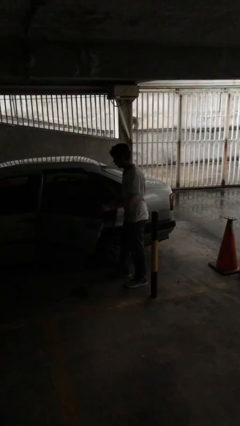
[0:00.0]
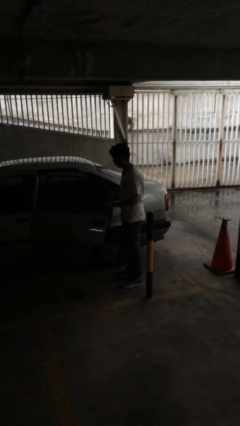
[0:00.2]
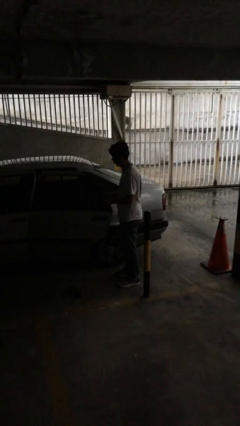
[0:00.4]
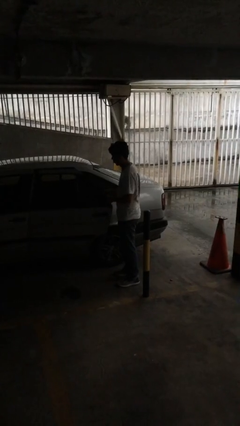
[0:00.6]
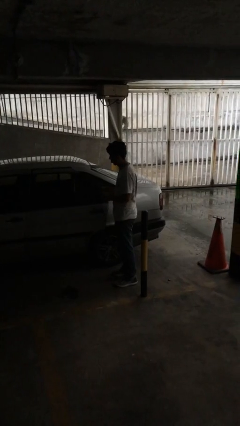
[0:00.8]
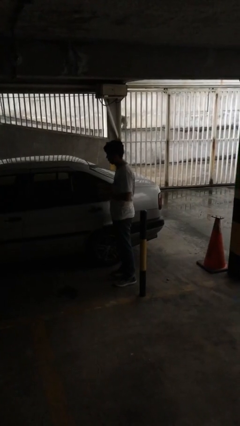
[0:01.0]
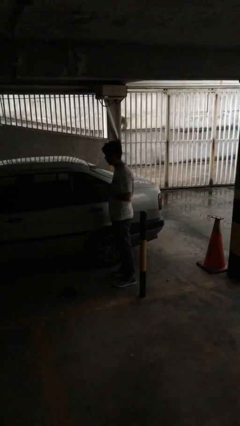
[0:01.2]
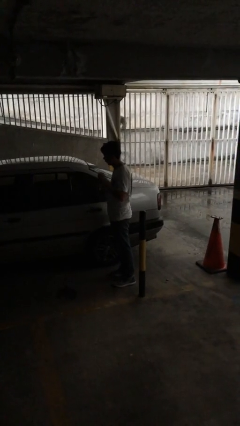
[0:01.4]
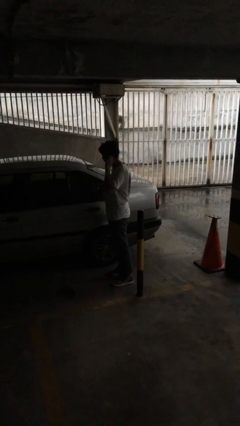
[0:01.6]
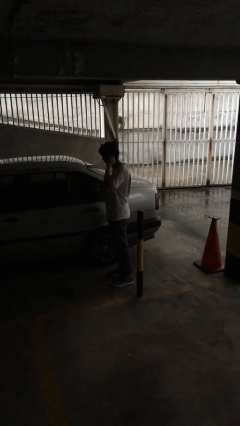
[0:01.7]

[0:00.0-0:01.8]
person closes car door

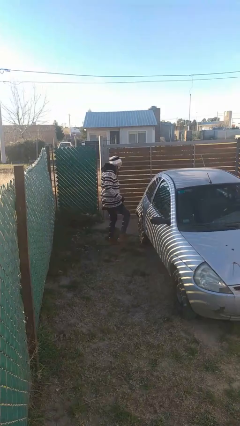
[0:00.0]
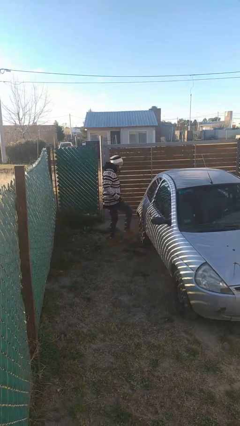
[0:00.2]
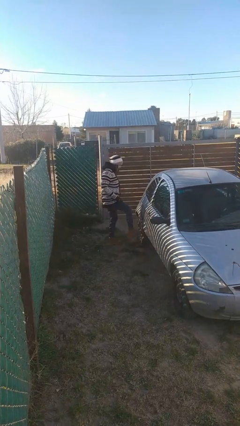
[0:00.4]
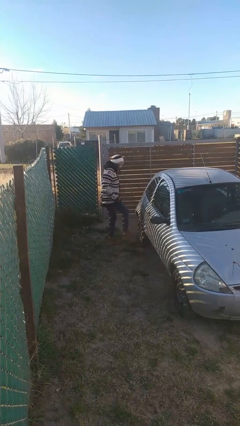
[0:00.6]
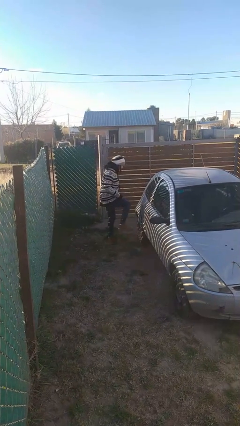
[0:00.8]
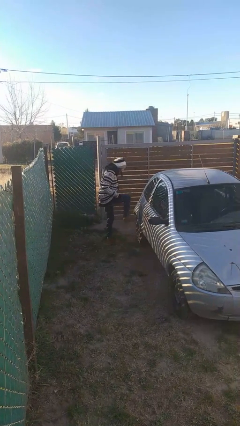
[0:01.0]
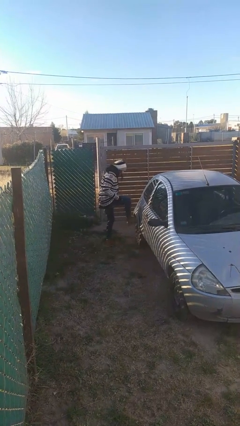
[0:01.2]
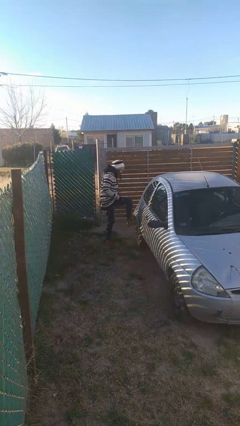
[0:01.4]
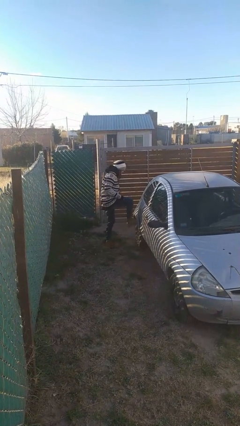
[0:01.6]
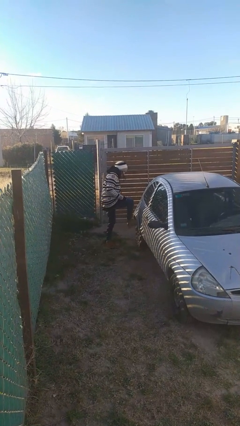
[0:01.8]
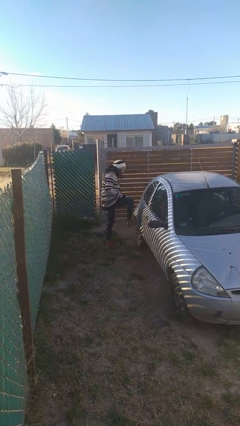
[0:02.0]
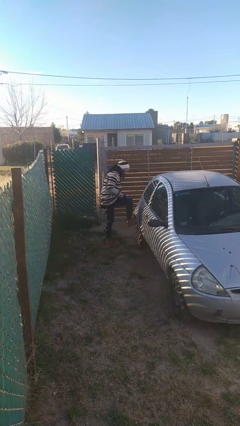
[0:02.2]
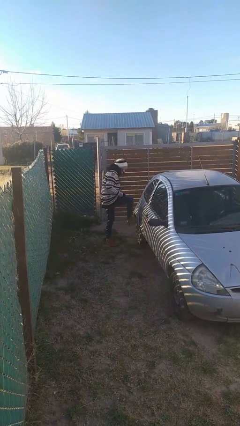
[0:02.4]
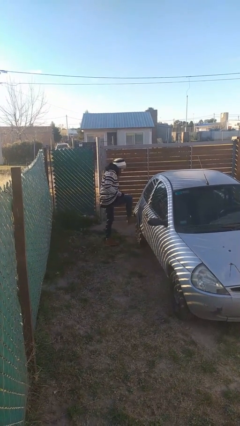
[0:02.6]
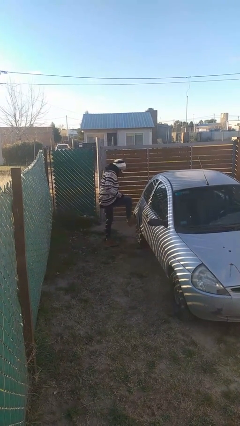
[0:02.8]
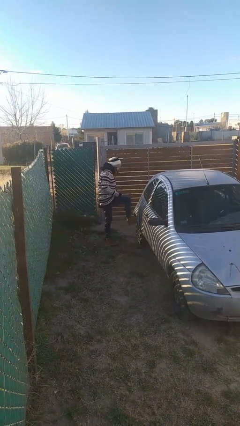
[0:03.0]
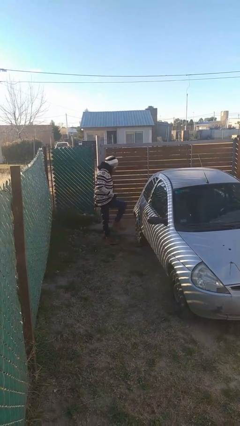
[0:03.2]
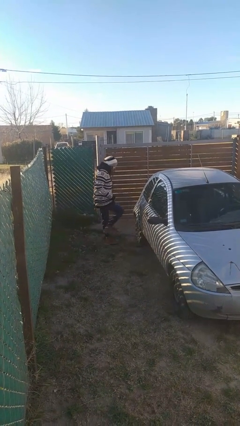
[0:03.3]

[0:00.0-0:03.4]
person kicks car tires

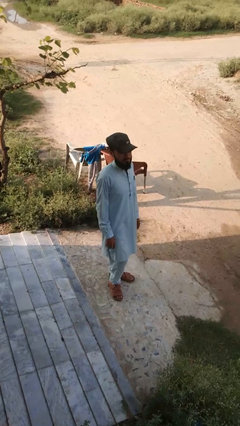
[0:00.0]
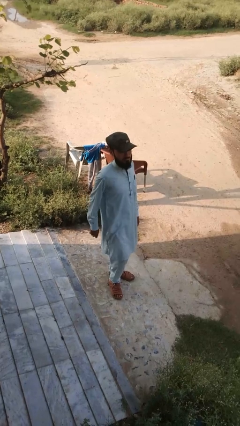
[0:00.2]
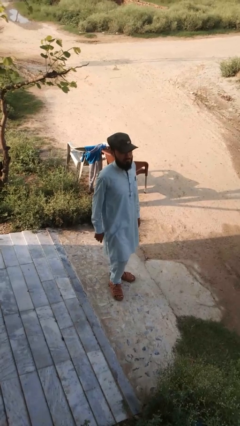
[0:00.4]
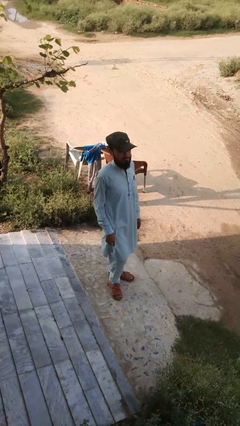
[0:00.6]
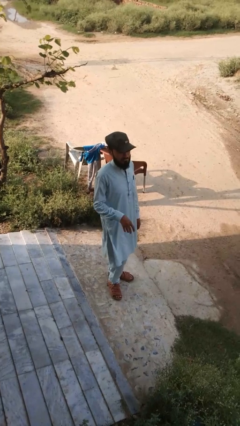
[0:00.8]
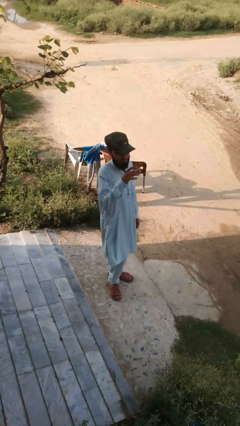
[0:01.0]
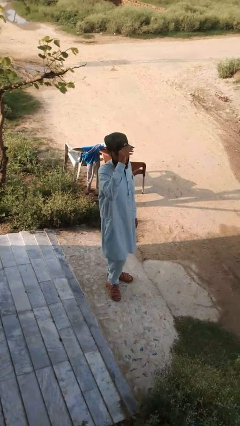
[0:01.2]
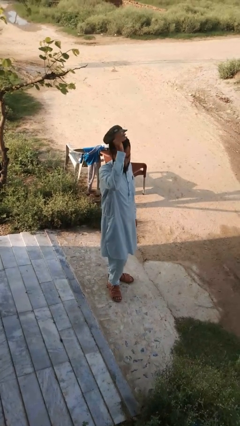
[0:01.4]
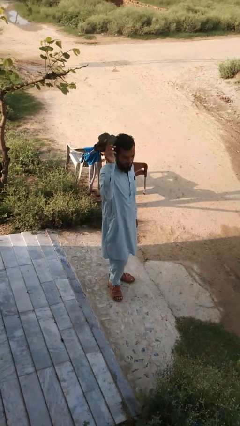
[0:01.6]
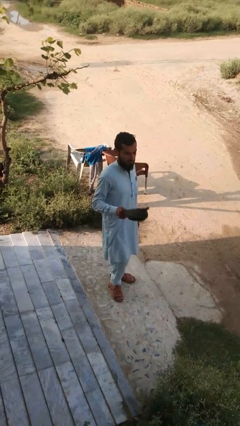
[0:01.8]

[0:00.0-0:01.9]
person takes off hat

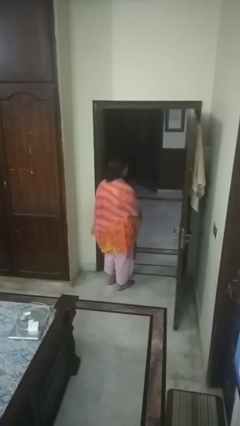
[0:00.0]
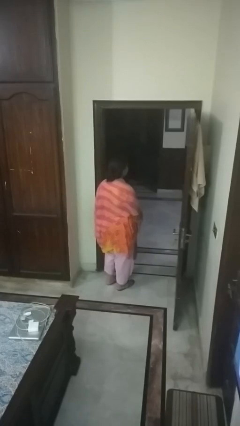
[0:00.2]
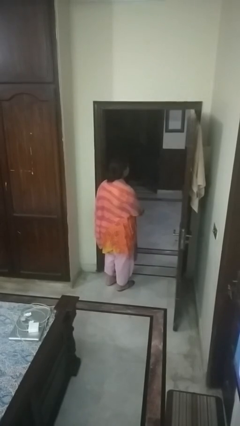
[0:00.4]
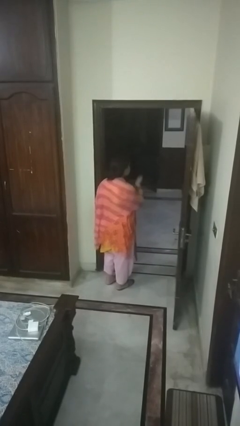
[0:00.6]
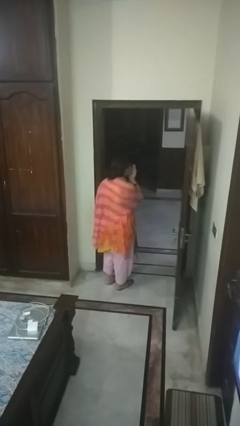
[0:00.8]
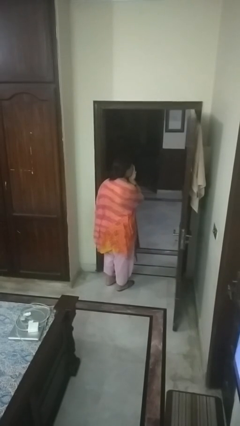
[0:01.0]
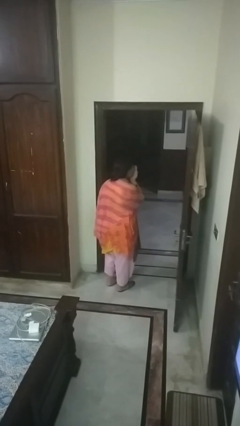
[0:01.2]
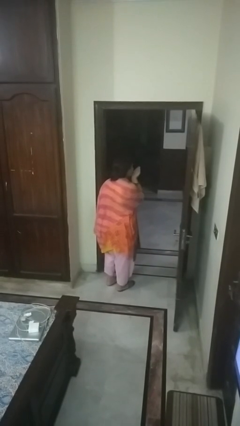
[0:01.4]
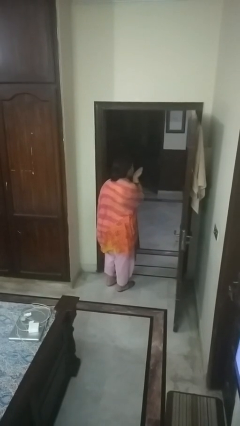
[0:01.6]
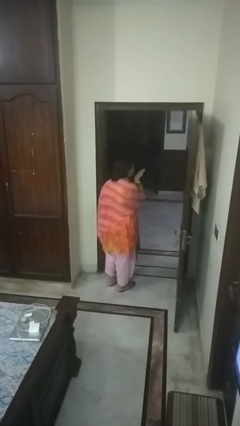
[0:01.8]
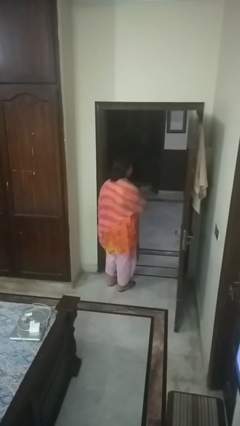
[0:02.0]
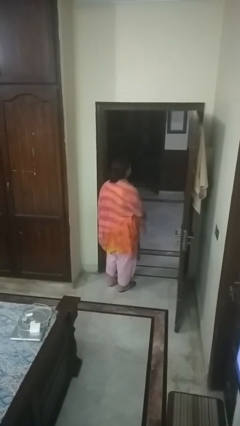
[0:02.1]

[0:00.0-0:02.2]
person gestures blow kiss

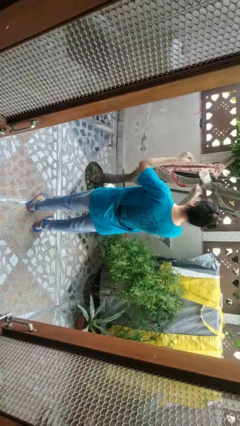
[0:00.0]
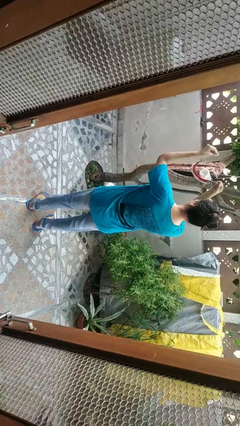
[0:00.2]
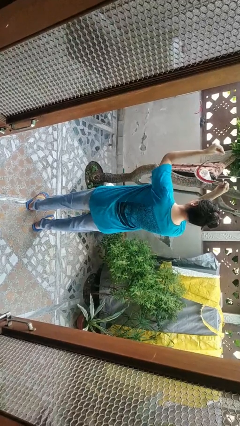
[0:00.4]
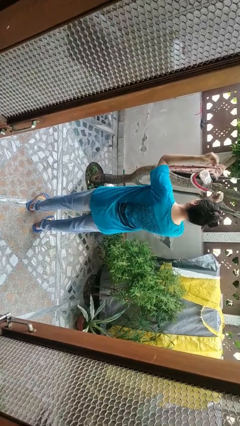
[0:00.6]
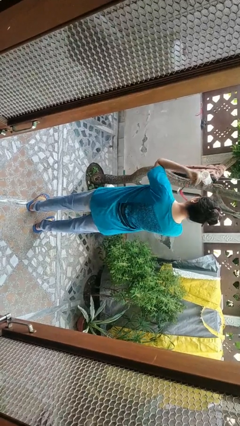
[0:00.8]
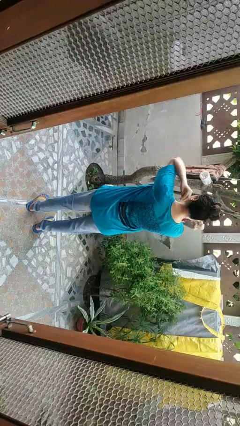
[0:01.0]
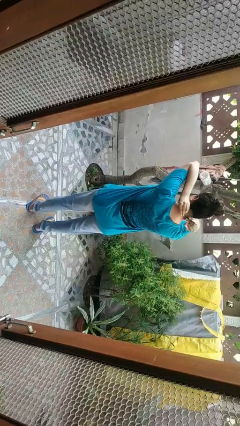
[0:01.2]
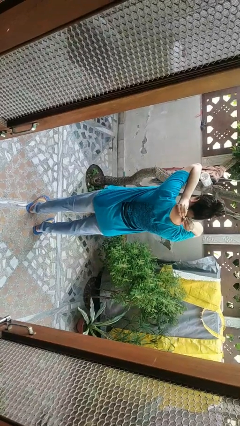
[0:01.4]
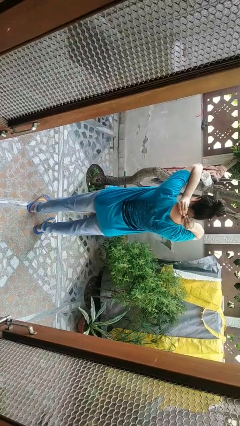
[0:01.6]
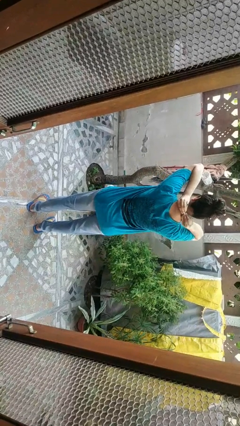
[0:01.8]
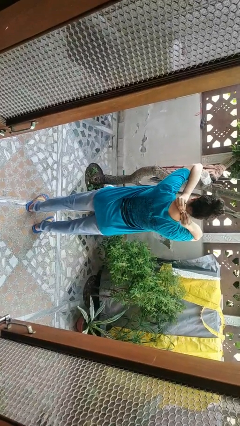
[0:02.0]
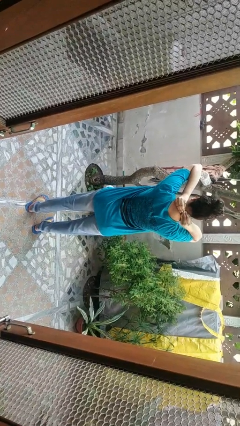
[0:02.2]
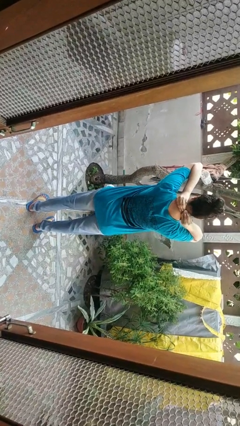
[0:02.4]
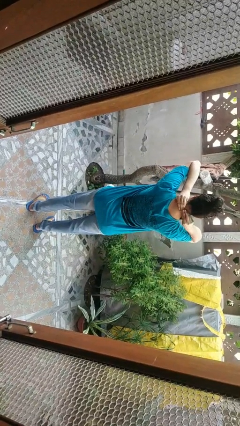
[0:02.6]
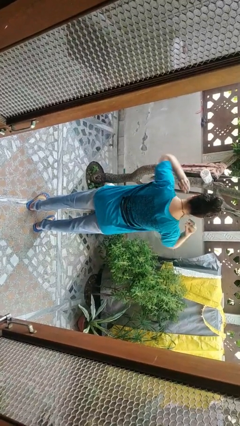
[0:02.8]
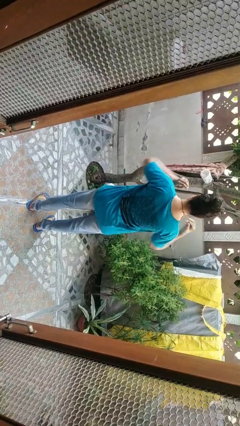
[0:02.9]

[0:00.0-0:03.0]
person puts on necklace

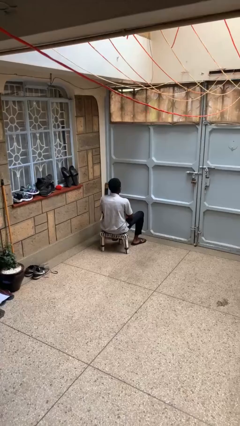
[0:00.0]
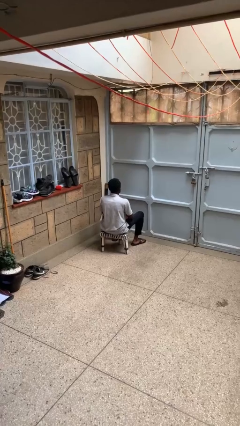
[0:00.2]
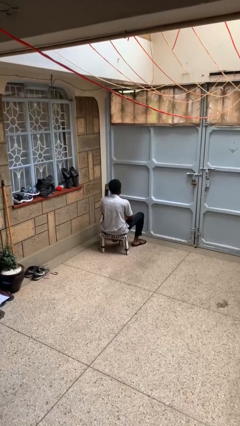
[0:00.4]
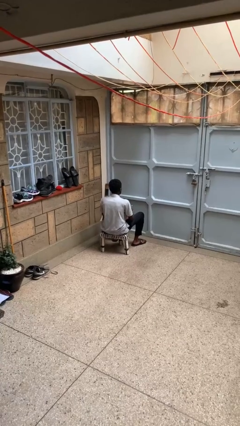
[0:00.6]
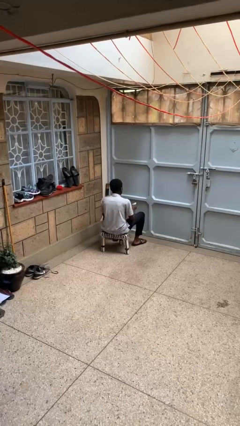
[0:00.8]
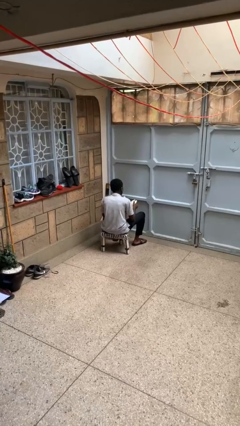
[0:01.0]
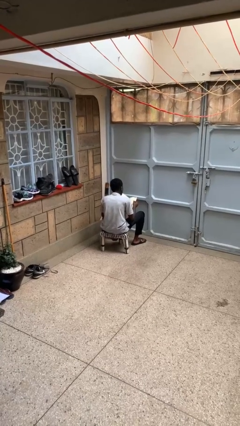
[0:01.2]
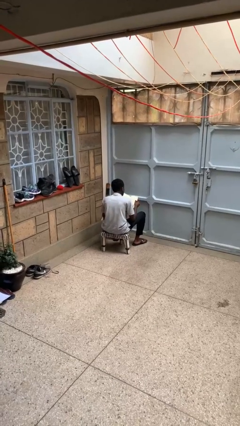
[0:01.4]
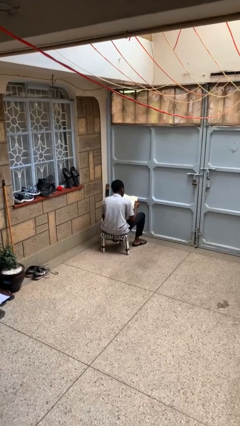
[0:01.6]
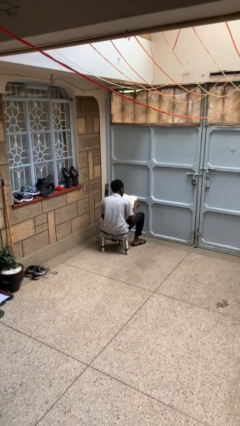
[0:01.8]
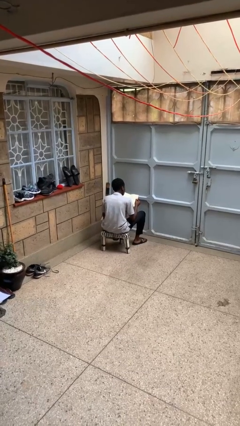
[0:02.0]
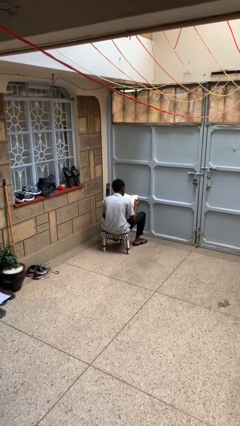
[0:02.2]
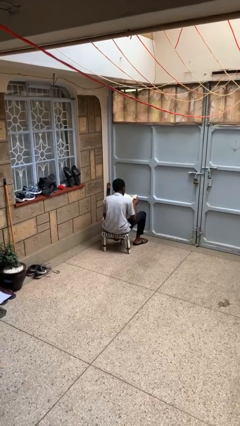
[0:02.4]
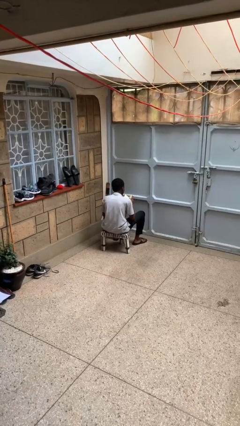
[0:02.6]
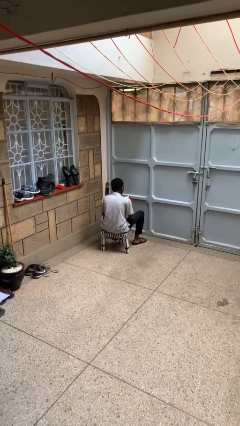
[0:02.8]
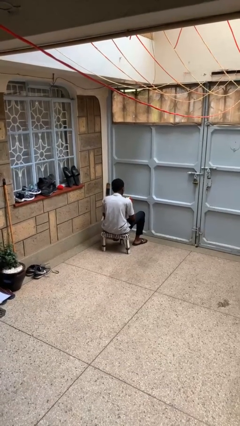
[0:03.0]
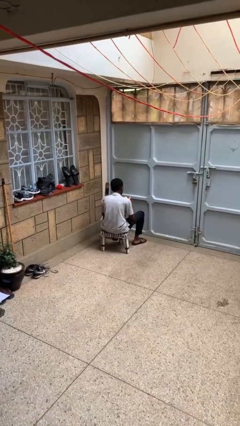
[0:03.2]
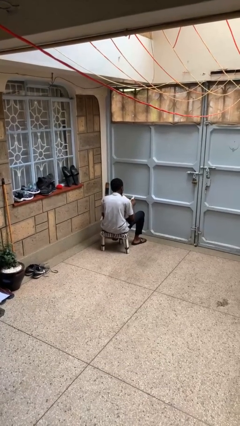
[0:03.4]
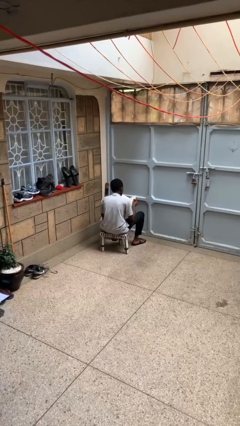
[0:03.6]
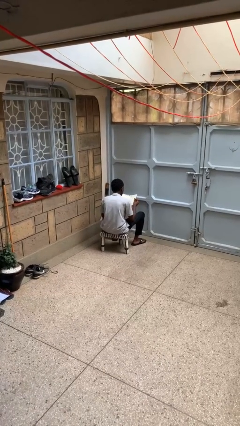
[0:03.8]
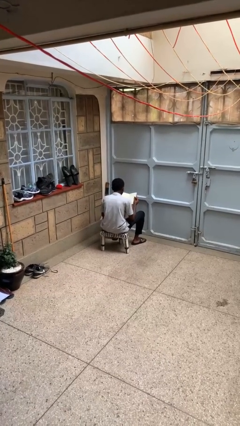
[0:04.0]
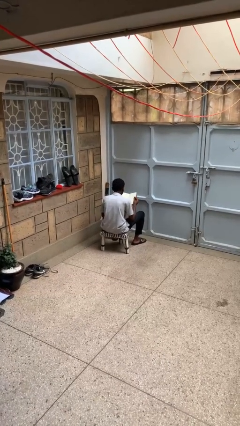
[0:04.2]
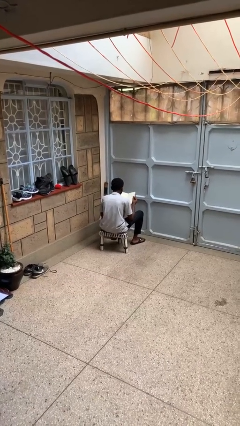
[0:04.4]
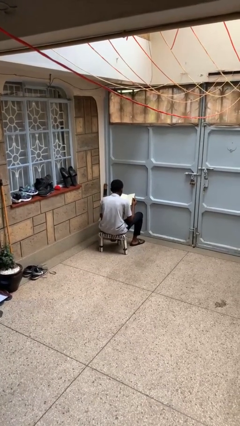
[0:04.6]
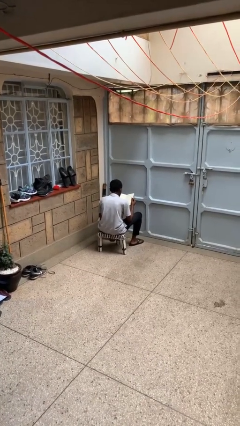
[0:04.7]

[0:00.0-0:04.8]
person reads book
